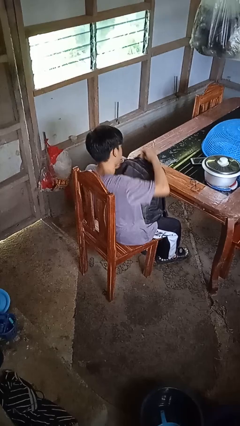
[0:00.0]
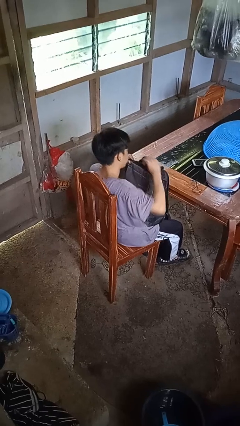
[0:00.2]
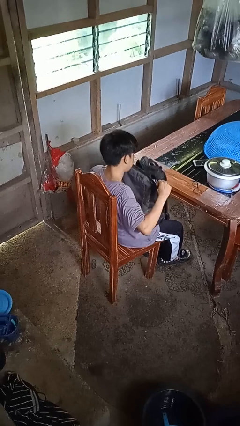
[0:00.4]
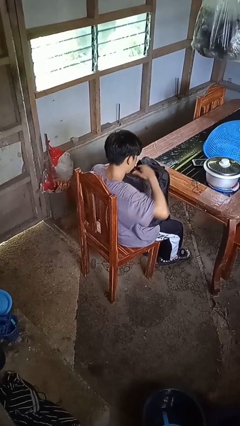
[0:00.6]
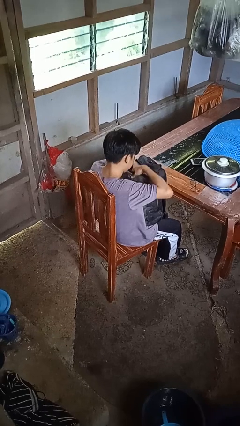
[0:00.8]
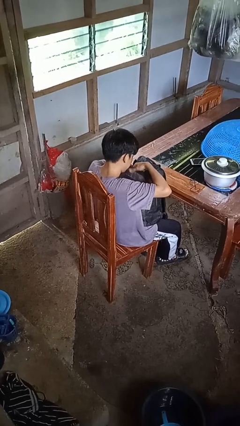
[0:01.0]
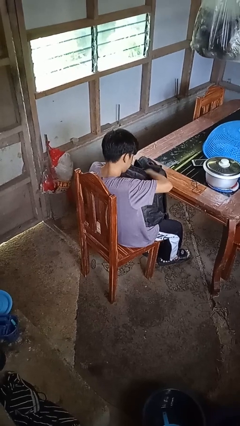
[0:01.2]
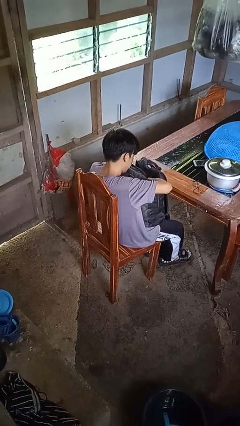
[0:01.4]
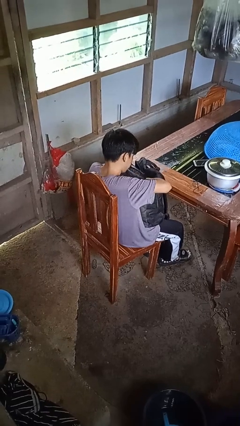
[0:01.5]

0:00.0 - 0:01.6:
person searches in backpack

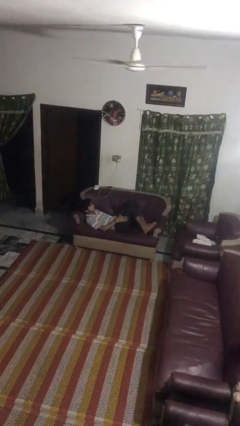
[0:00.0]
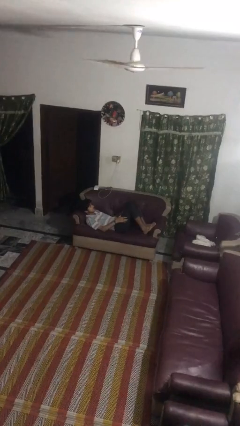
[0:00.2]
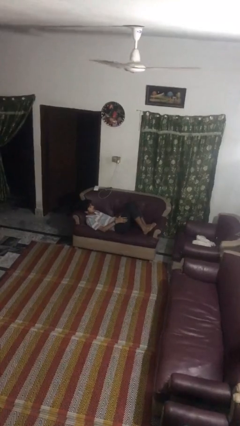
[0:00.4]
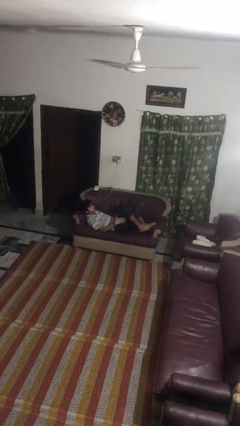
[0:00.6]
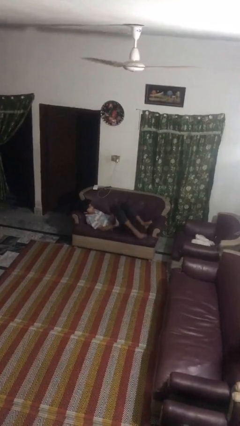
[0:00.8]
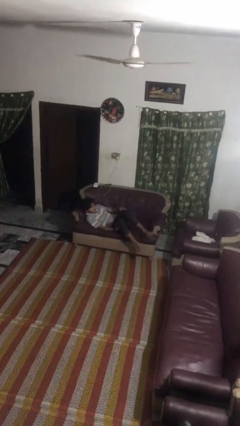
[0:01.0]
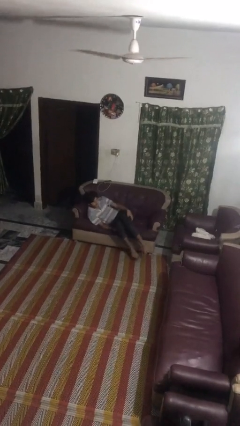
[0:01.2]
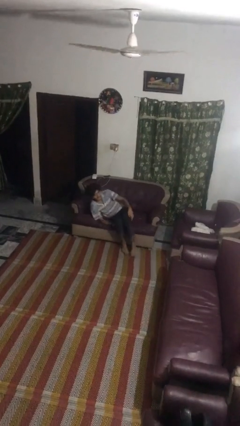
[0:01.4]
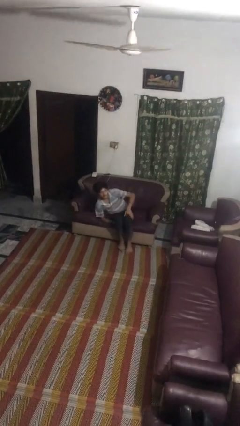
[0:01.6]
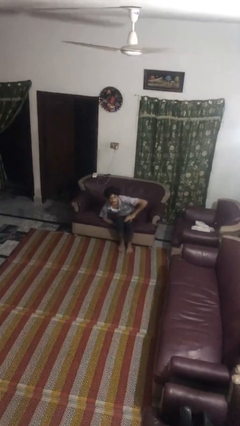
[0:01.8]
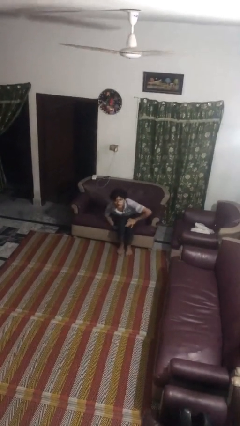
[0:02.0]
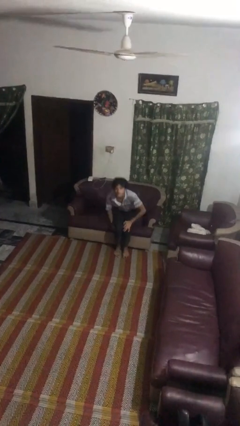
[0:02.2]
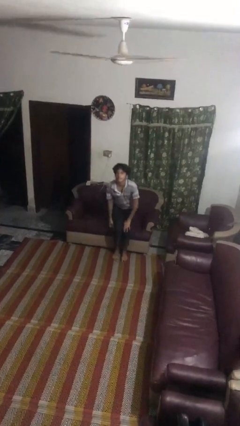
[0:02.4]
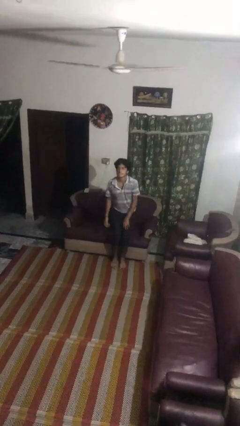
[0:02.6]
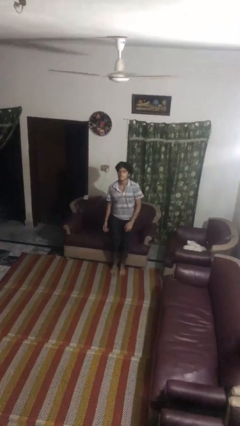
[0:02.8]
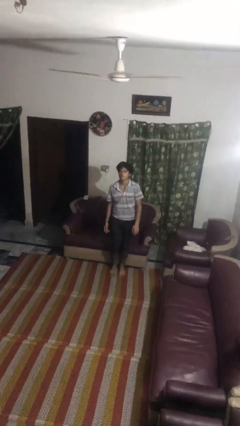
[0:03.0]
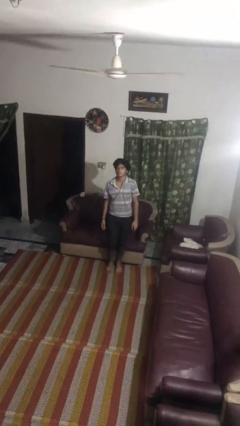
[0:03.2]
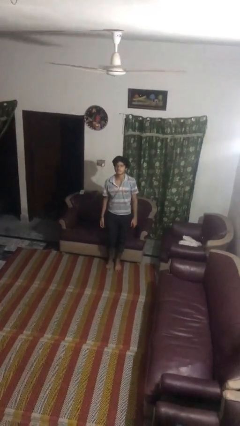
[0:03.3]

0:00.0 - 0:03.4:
person stands up

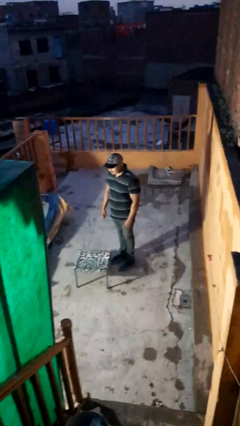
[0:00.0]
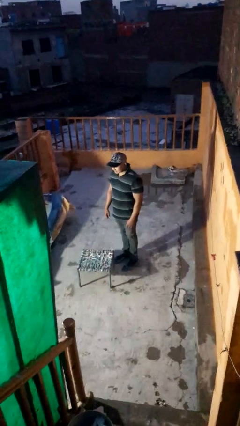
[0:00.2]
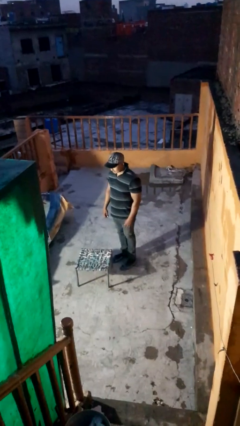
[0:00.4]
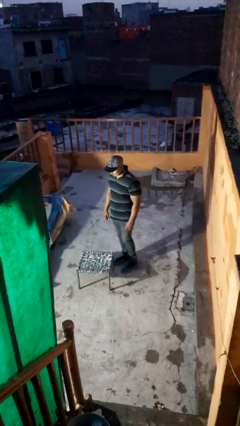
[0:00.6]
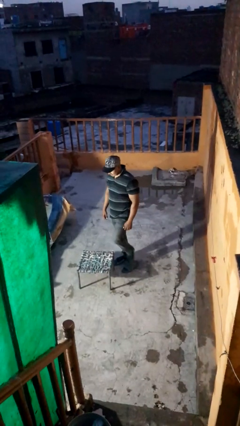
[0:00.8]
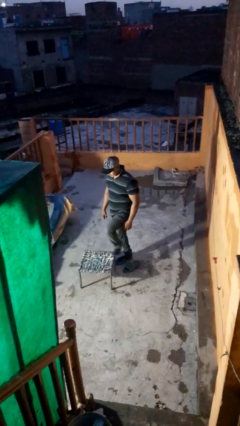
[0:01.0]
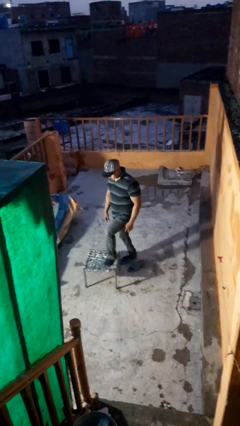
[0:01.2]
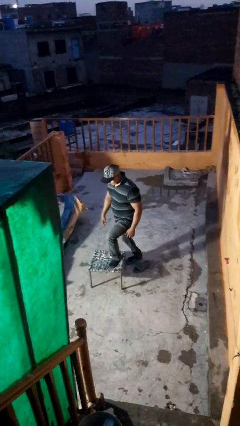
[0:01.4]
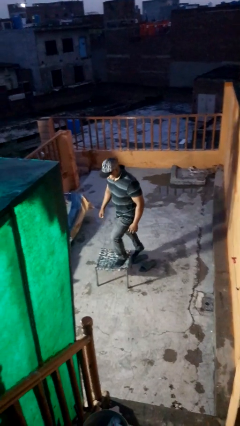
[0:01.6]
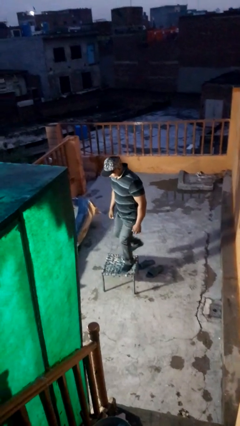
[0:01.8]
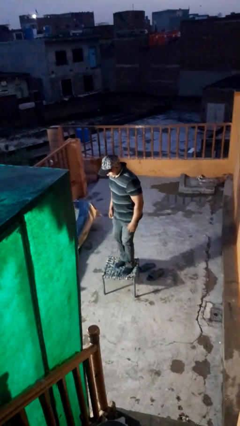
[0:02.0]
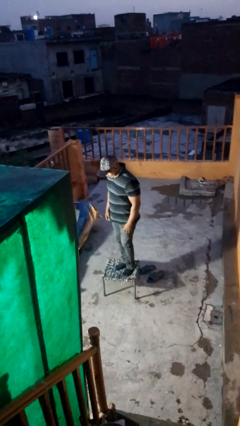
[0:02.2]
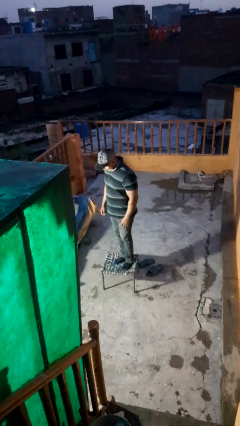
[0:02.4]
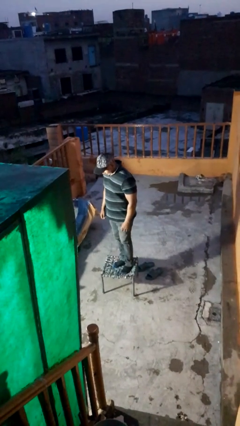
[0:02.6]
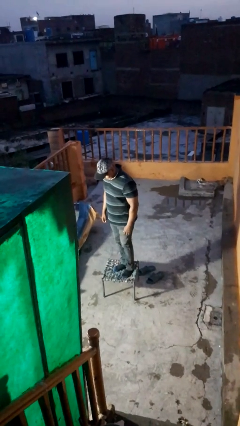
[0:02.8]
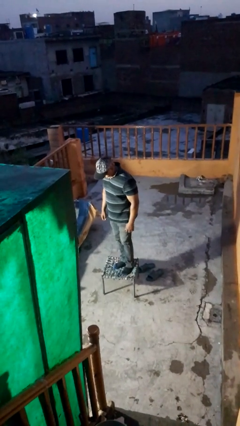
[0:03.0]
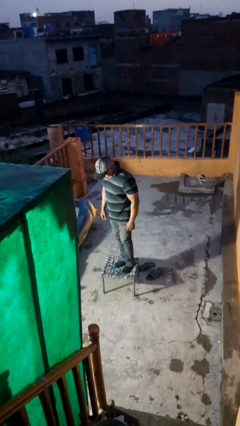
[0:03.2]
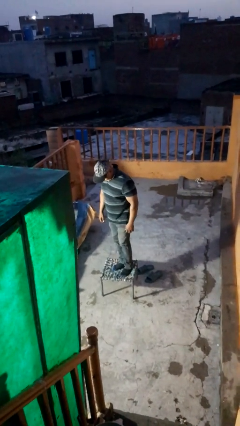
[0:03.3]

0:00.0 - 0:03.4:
person climbs on table

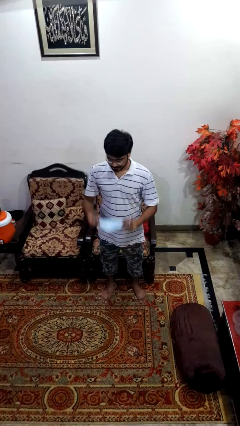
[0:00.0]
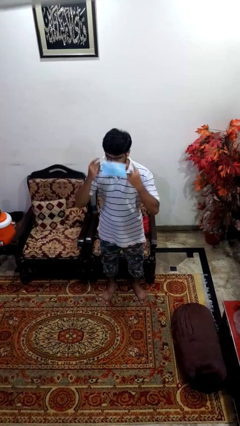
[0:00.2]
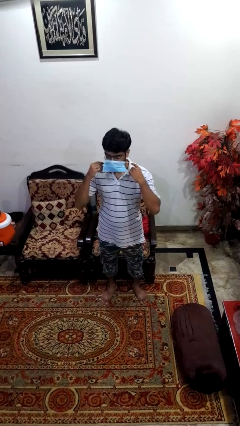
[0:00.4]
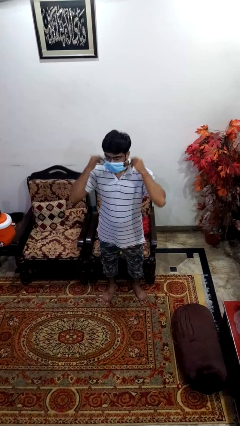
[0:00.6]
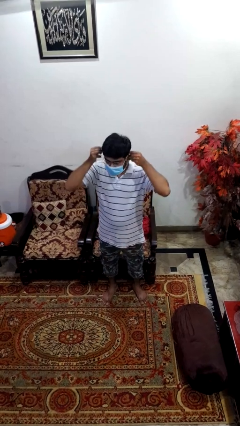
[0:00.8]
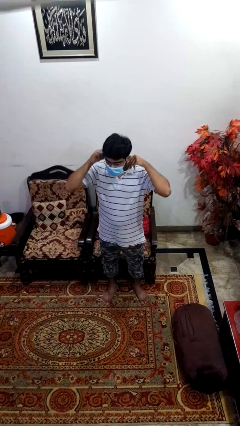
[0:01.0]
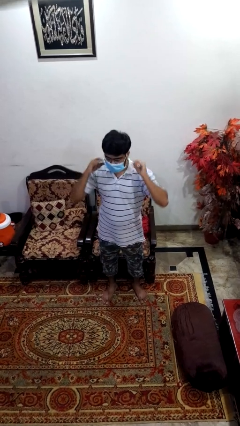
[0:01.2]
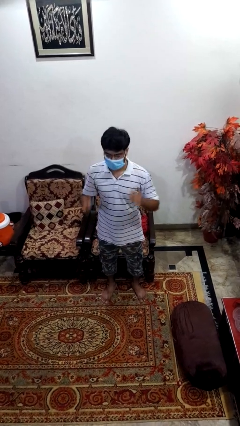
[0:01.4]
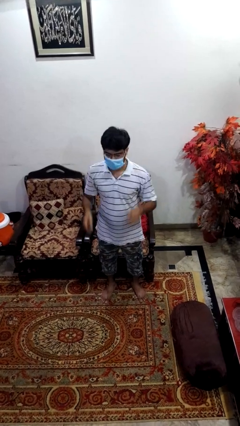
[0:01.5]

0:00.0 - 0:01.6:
person puts on facemask

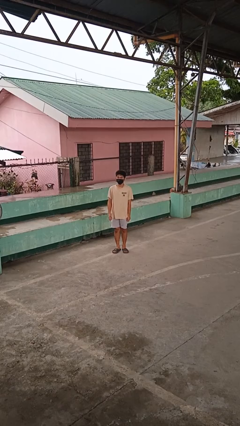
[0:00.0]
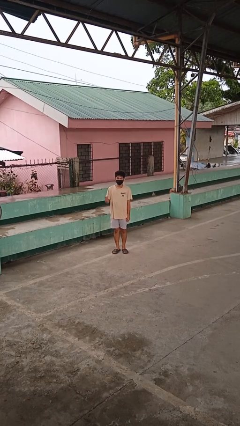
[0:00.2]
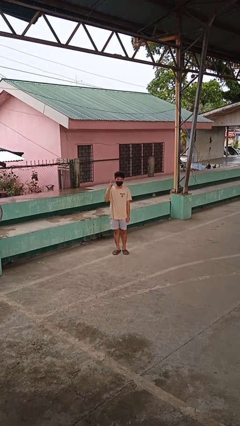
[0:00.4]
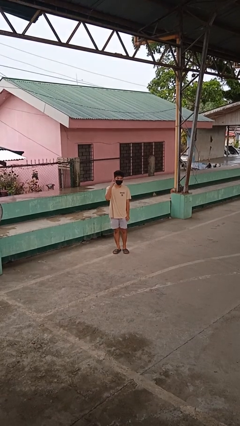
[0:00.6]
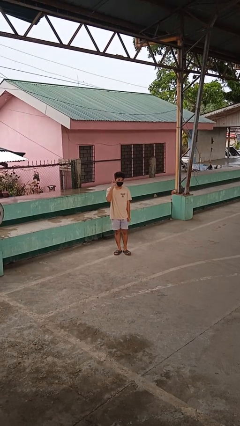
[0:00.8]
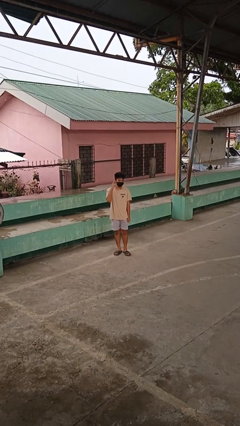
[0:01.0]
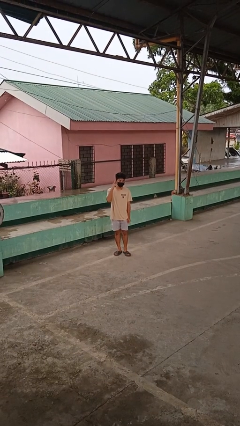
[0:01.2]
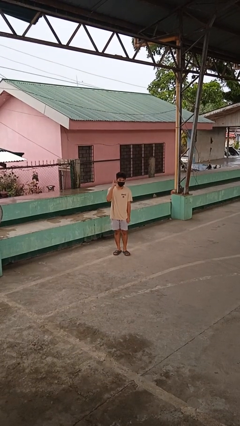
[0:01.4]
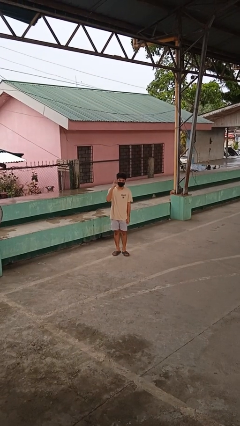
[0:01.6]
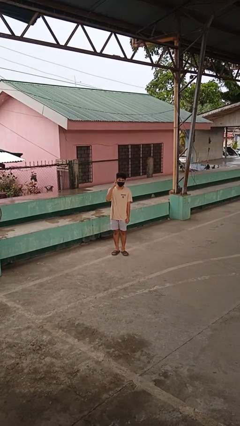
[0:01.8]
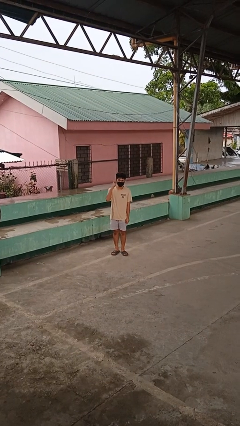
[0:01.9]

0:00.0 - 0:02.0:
person gestures listen closely

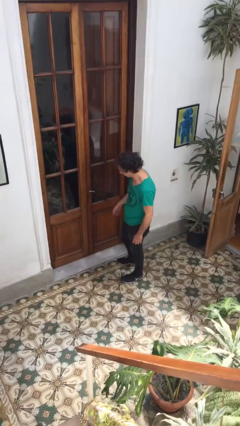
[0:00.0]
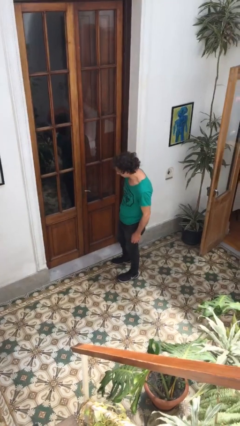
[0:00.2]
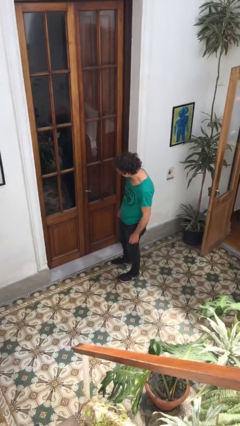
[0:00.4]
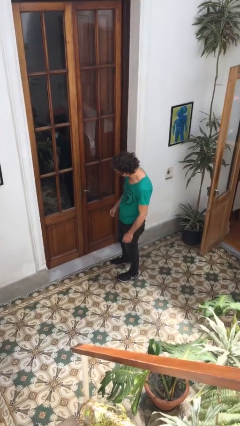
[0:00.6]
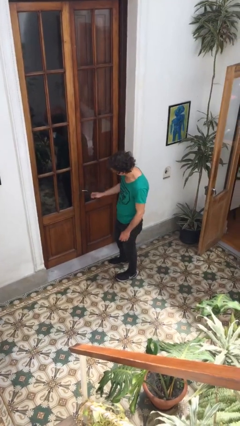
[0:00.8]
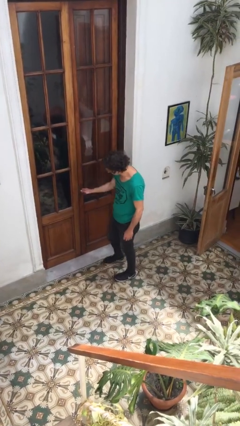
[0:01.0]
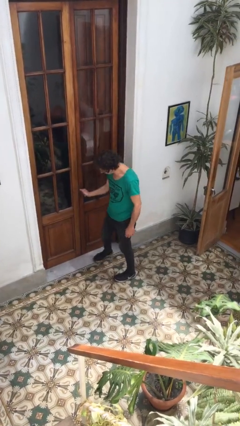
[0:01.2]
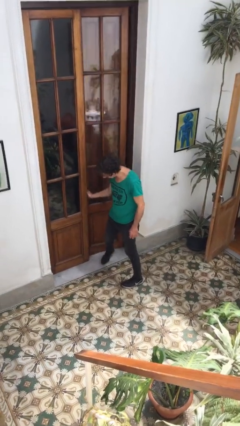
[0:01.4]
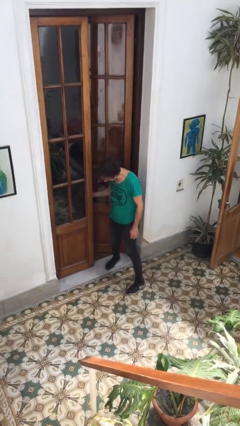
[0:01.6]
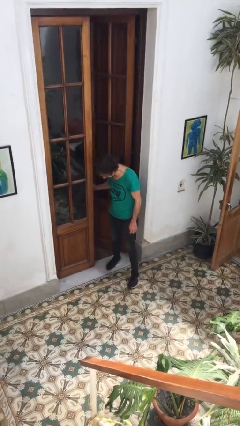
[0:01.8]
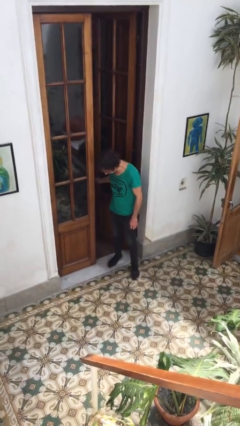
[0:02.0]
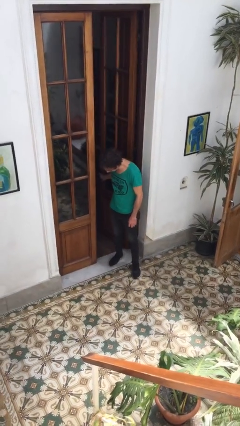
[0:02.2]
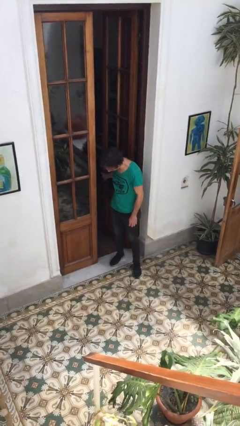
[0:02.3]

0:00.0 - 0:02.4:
person opens facility door

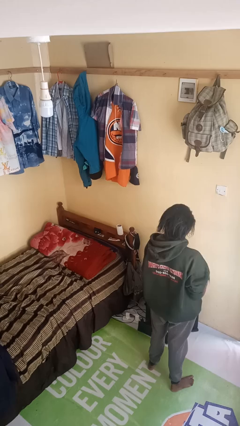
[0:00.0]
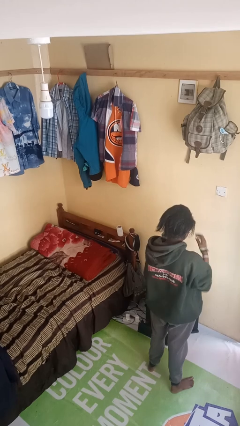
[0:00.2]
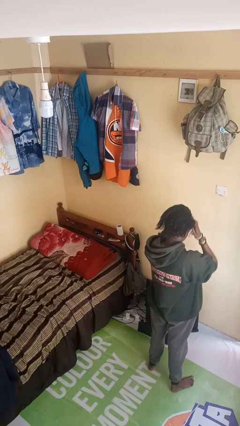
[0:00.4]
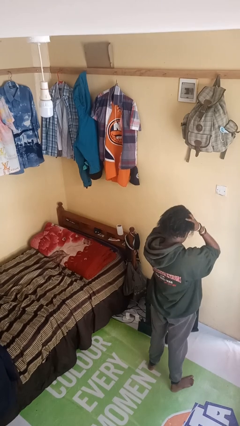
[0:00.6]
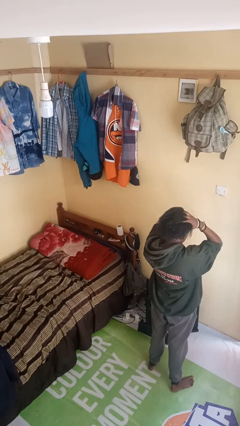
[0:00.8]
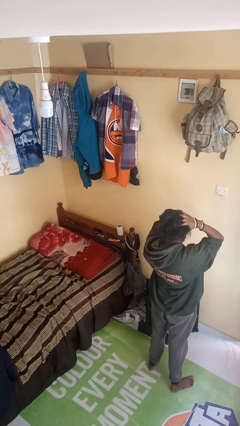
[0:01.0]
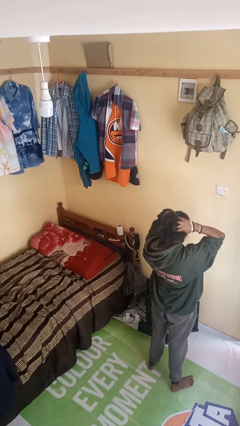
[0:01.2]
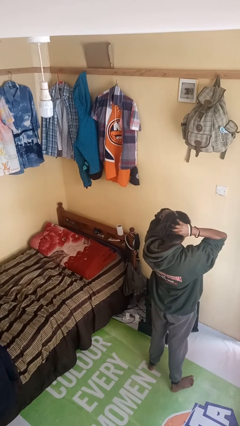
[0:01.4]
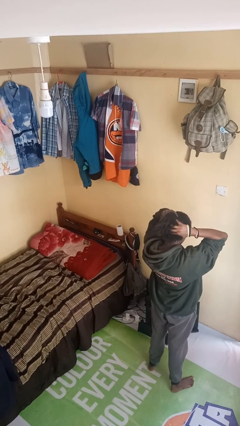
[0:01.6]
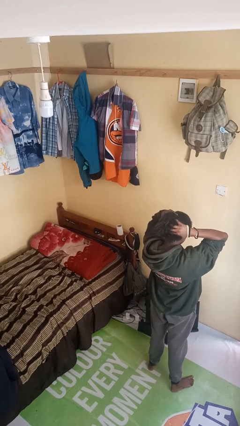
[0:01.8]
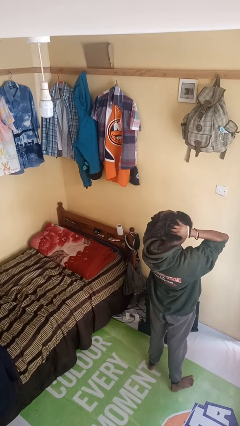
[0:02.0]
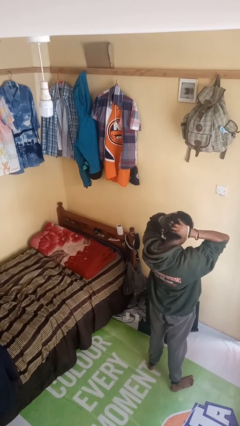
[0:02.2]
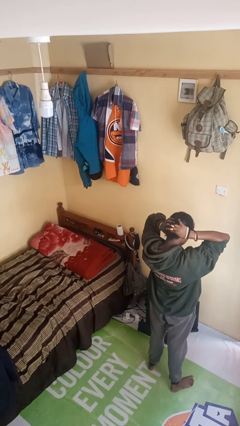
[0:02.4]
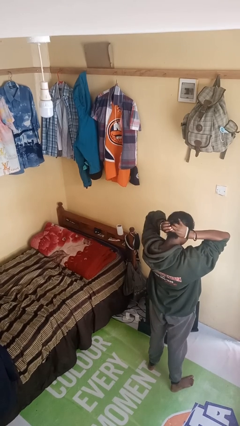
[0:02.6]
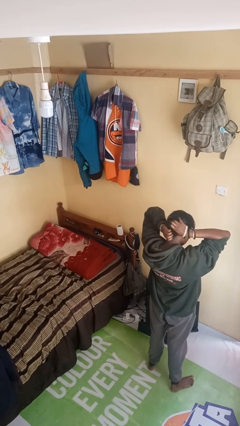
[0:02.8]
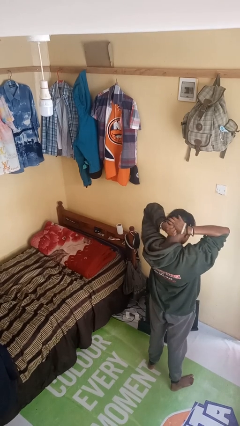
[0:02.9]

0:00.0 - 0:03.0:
person strokes hair

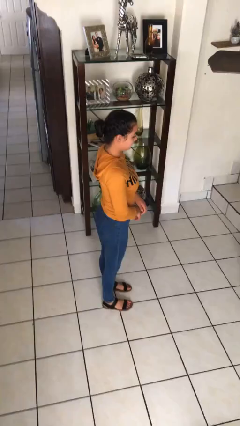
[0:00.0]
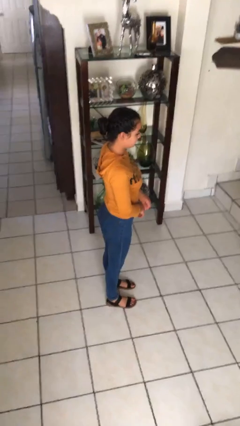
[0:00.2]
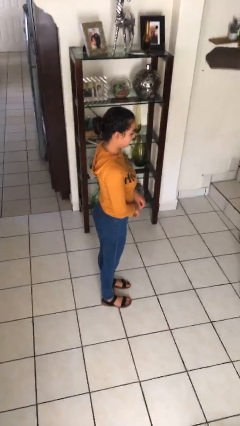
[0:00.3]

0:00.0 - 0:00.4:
person twirls
